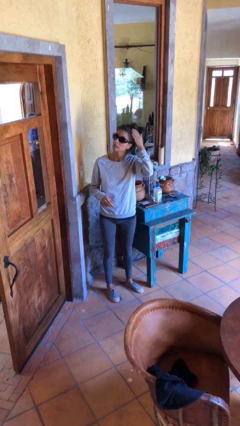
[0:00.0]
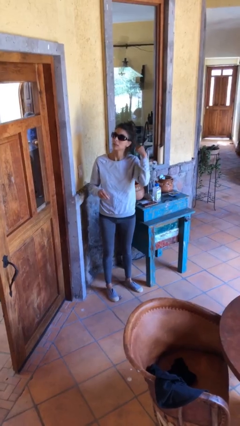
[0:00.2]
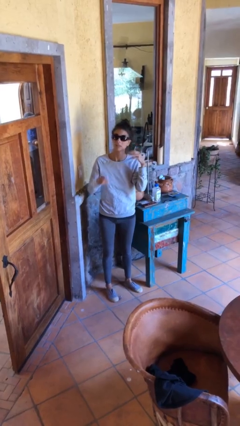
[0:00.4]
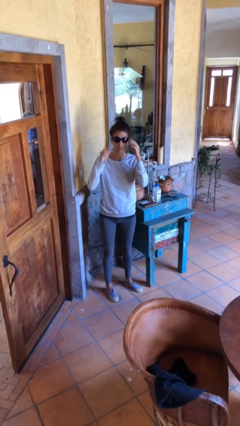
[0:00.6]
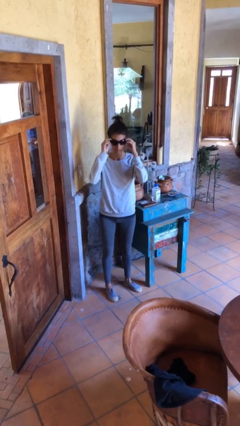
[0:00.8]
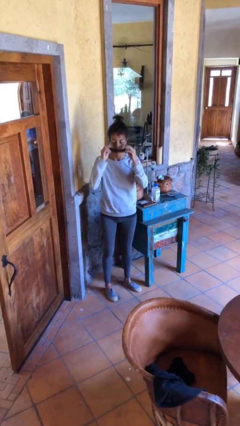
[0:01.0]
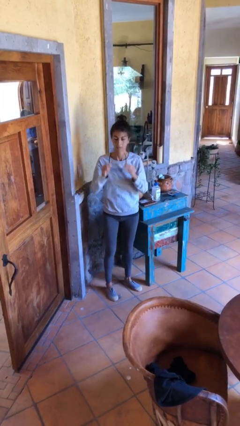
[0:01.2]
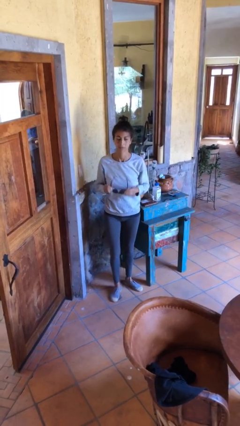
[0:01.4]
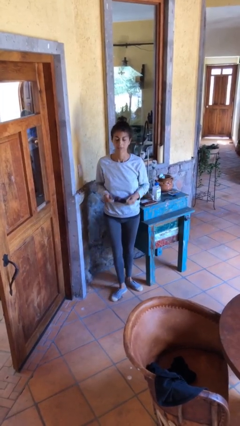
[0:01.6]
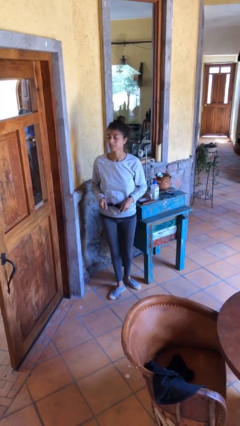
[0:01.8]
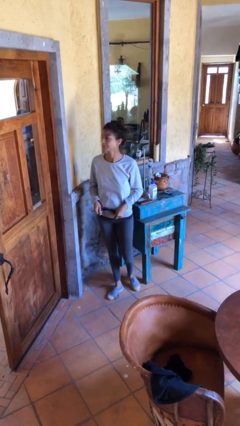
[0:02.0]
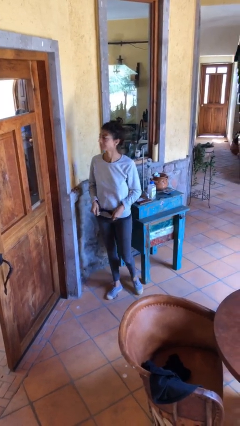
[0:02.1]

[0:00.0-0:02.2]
person takes off sunglasses

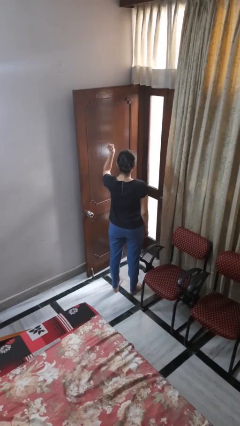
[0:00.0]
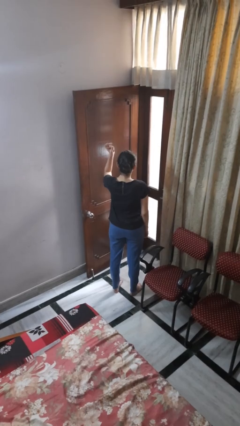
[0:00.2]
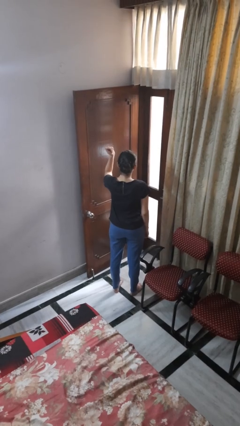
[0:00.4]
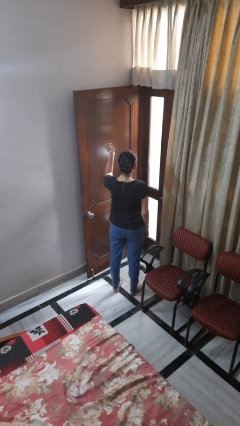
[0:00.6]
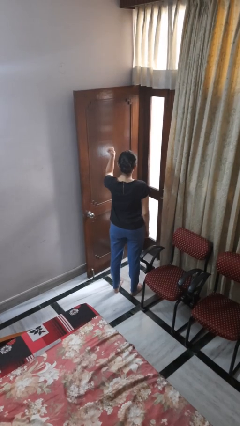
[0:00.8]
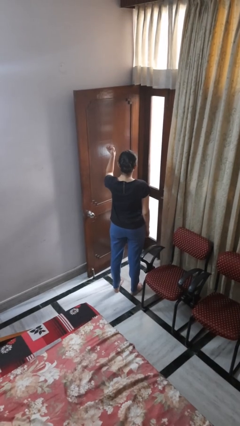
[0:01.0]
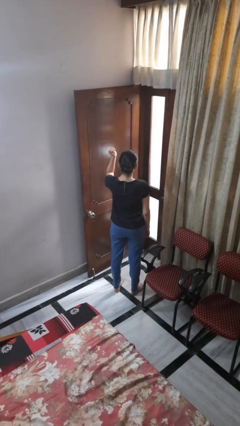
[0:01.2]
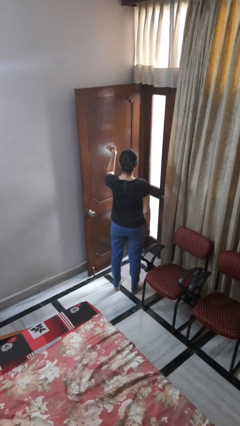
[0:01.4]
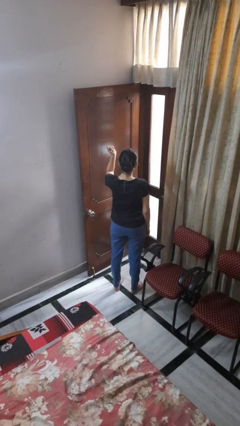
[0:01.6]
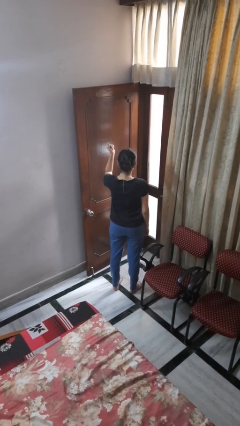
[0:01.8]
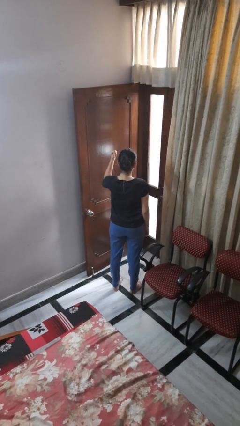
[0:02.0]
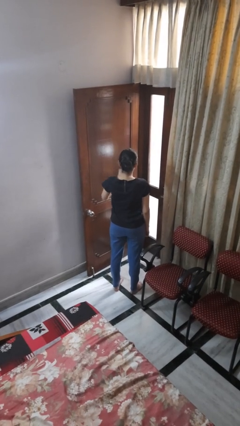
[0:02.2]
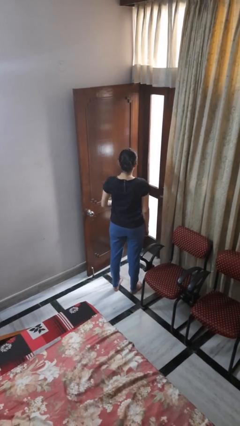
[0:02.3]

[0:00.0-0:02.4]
person snaps fingers

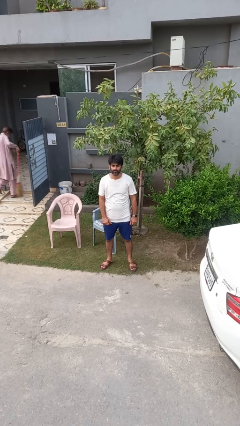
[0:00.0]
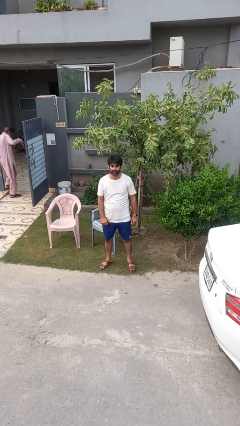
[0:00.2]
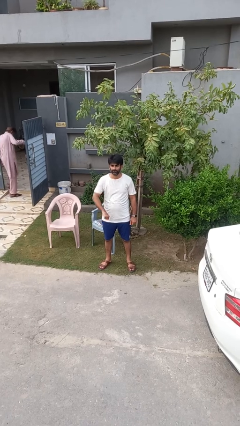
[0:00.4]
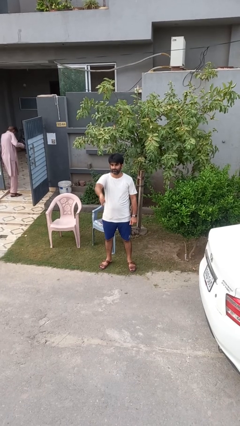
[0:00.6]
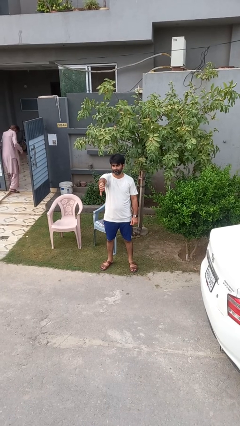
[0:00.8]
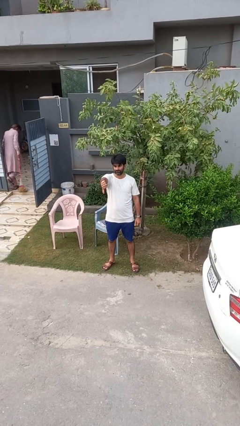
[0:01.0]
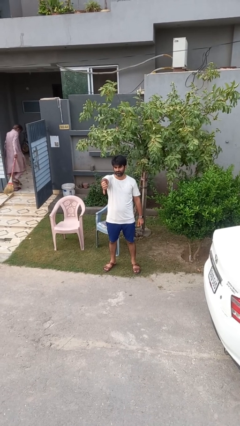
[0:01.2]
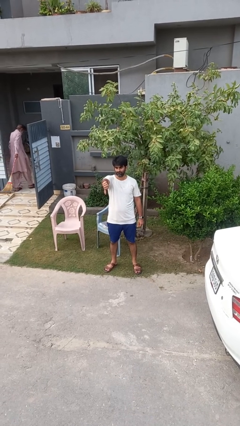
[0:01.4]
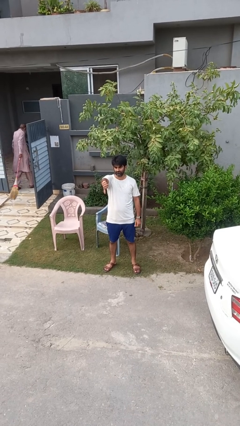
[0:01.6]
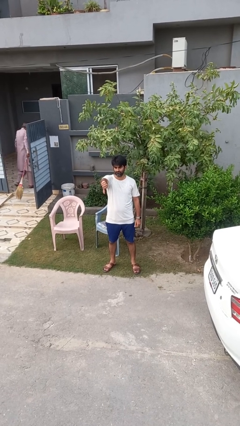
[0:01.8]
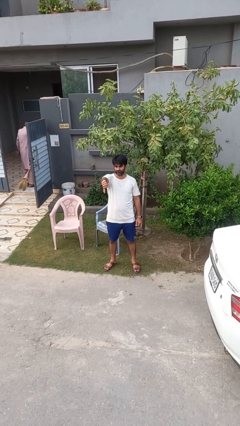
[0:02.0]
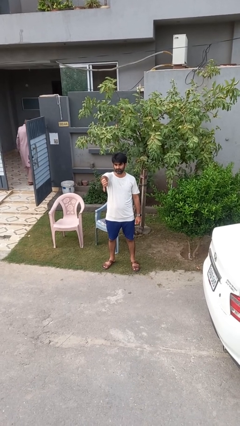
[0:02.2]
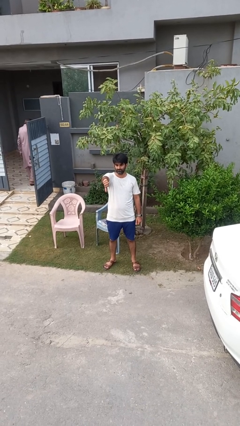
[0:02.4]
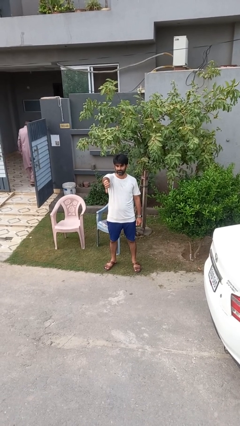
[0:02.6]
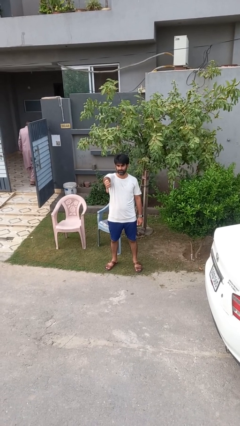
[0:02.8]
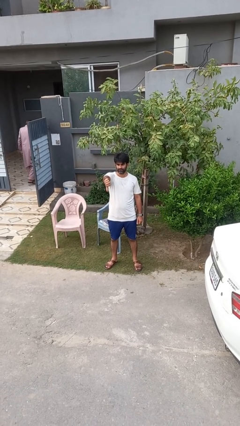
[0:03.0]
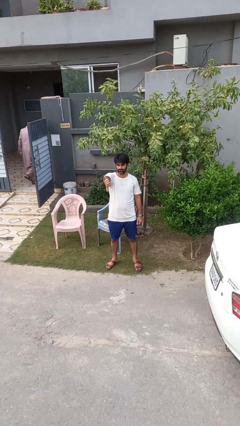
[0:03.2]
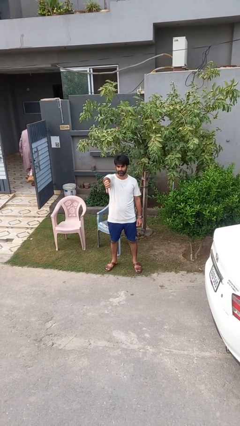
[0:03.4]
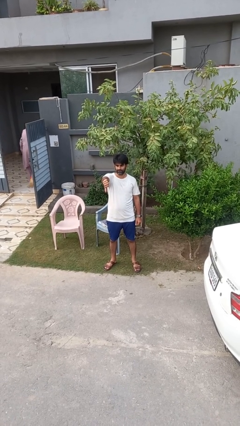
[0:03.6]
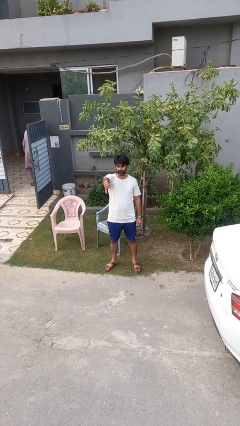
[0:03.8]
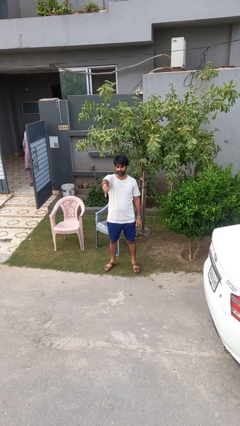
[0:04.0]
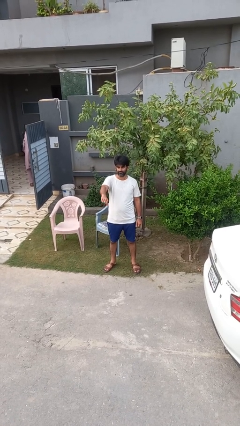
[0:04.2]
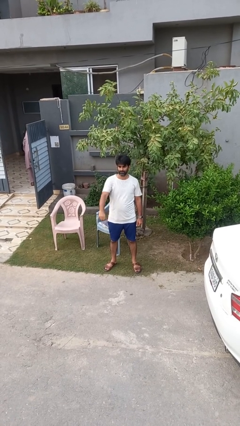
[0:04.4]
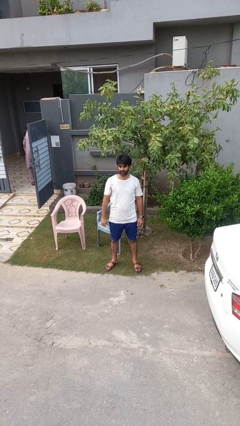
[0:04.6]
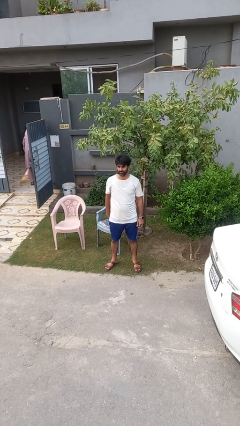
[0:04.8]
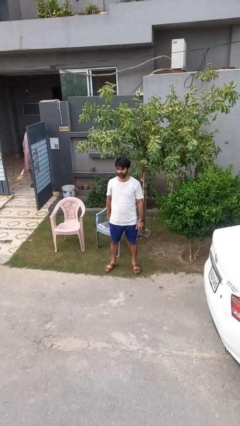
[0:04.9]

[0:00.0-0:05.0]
person gestures thumbs down

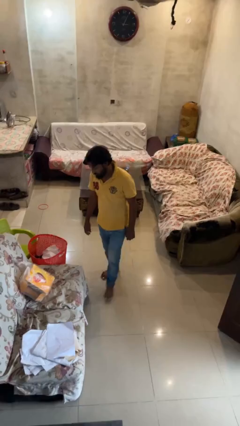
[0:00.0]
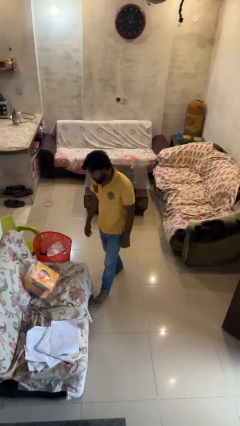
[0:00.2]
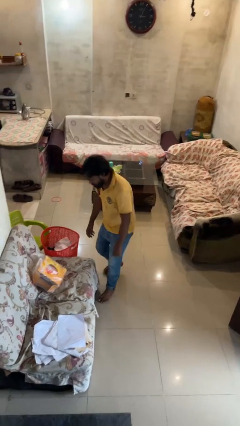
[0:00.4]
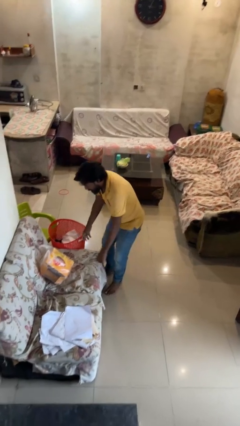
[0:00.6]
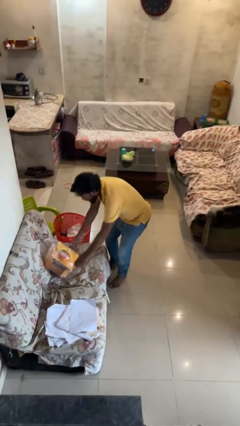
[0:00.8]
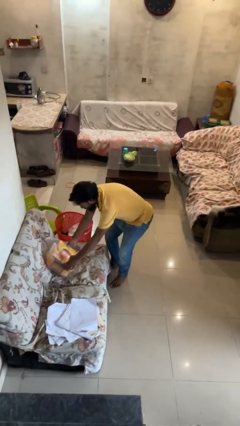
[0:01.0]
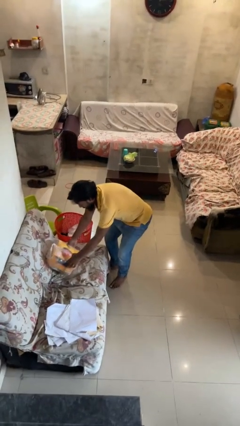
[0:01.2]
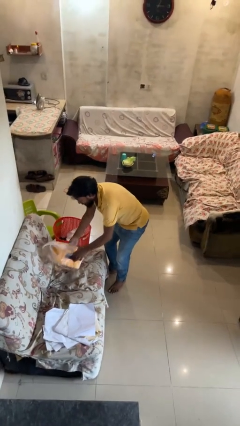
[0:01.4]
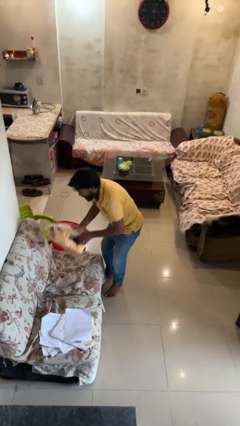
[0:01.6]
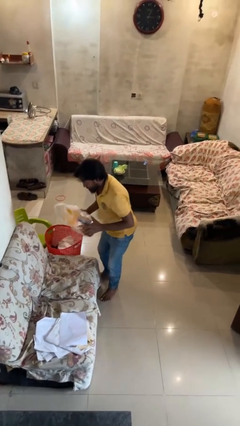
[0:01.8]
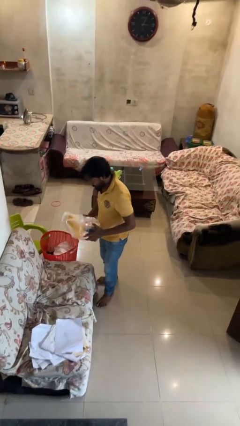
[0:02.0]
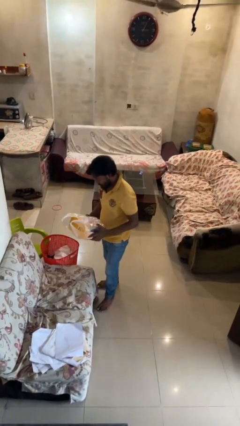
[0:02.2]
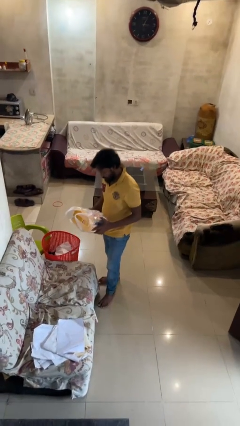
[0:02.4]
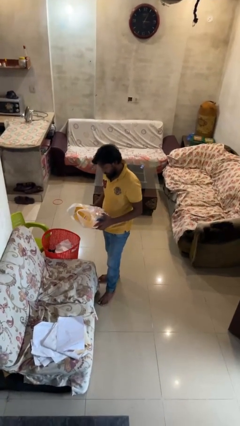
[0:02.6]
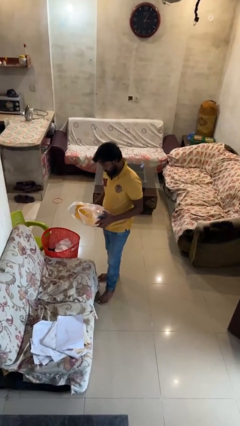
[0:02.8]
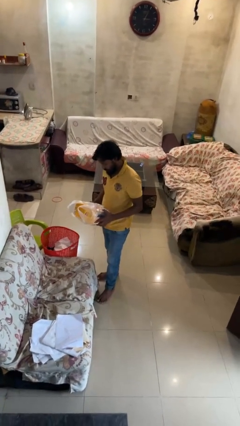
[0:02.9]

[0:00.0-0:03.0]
person picks up object from couch

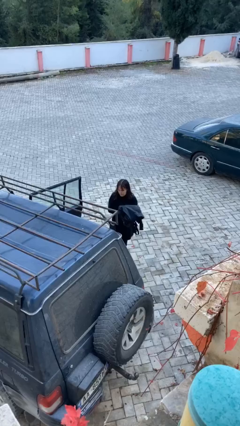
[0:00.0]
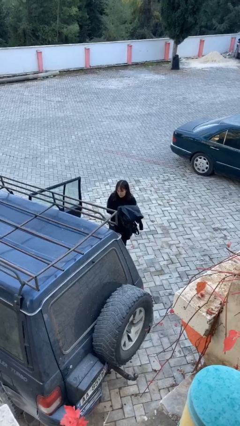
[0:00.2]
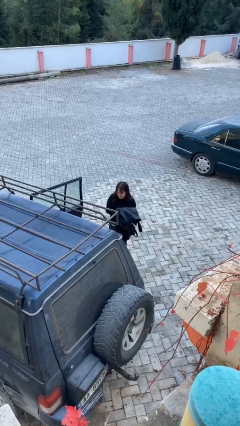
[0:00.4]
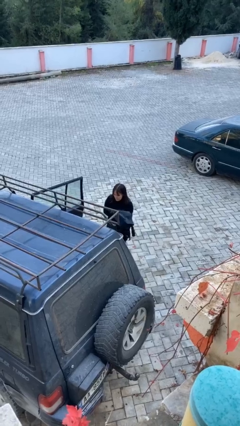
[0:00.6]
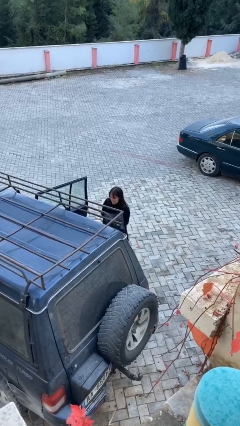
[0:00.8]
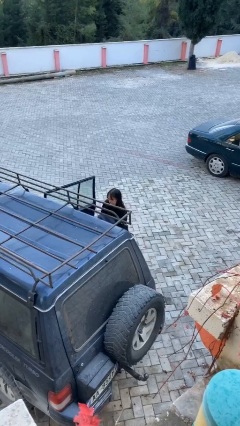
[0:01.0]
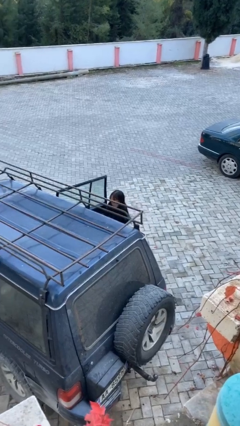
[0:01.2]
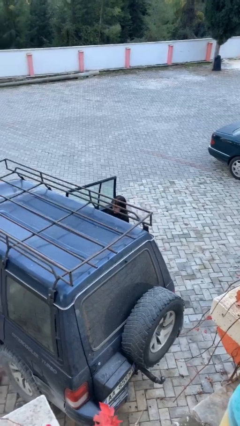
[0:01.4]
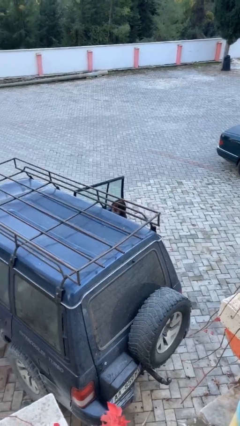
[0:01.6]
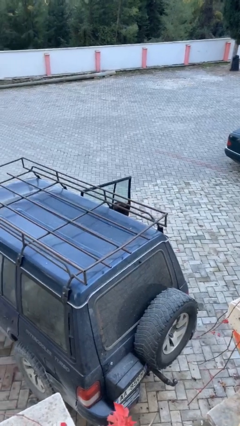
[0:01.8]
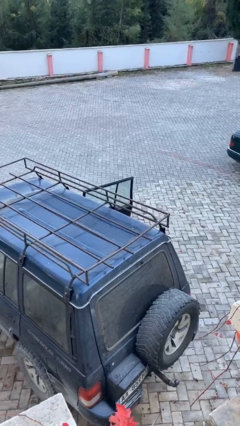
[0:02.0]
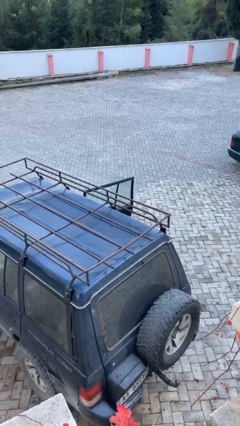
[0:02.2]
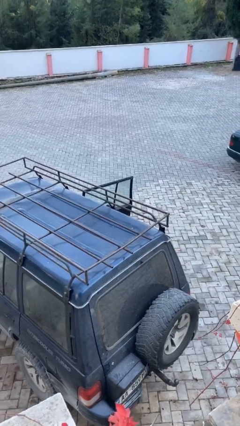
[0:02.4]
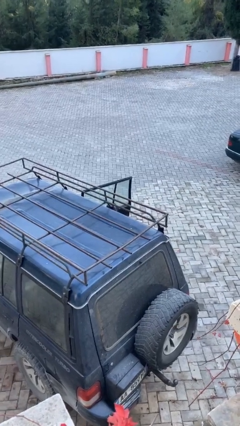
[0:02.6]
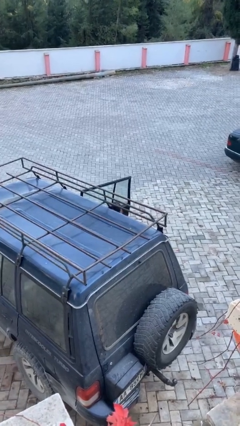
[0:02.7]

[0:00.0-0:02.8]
person loads car

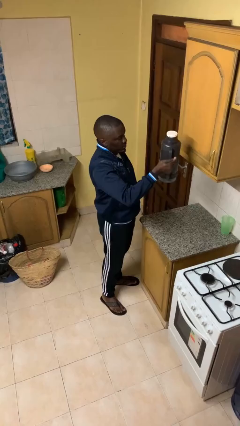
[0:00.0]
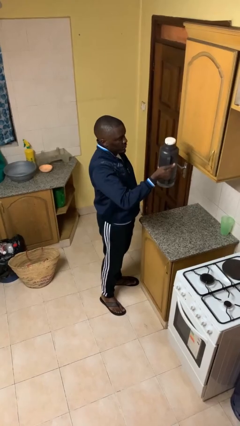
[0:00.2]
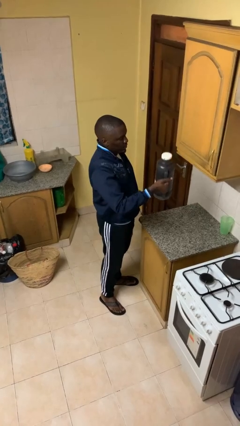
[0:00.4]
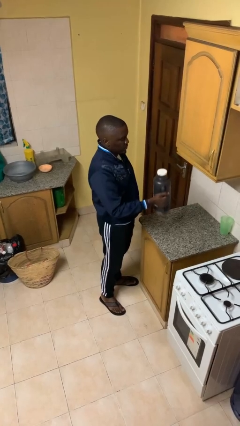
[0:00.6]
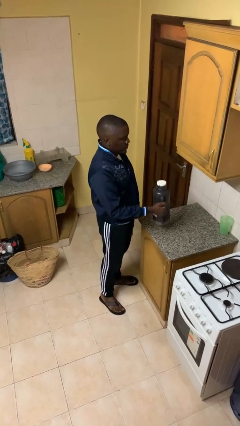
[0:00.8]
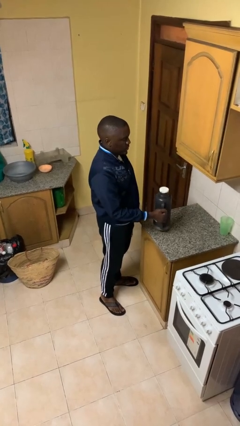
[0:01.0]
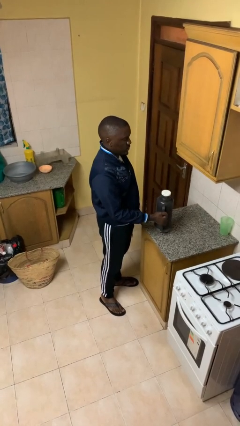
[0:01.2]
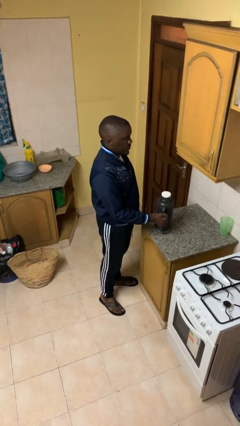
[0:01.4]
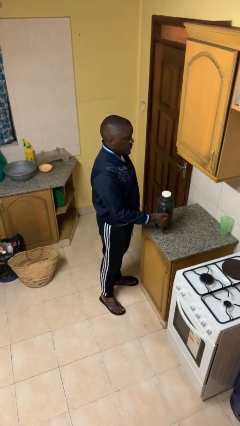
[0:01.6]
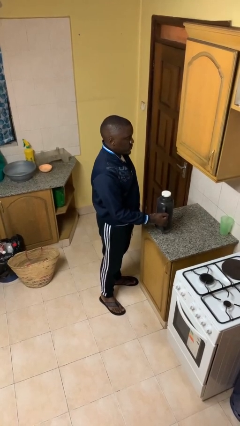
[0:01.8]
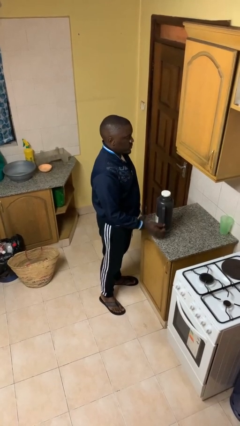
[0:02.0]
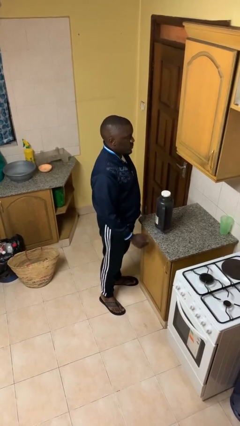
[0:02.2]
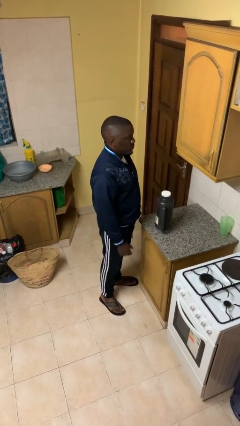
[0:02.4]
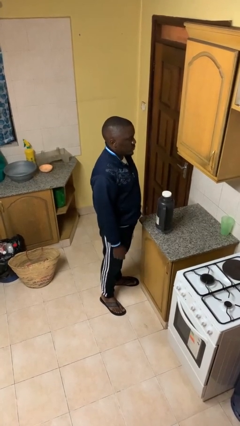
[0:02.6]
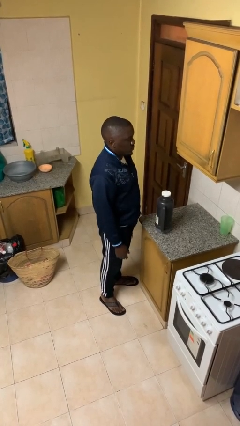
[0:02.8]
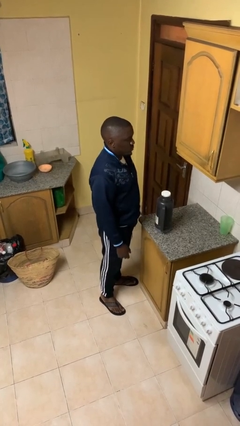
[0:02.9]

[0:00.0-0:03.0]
person puts down object on countertop
